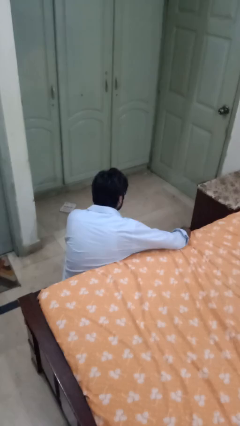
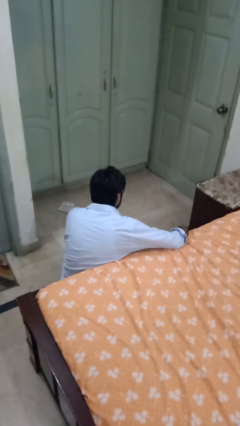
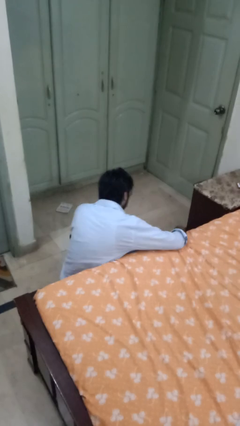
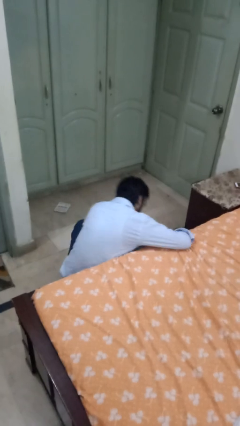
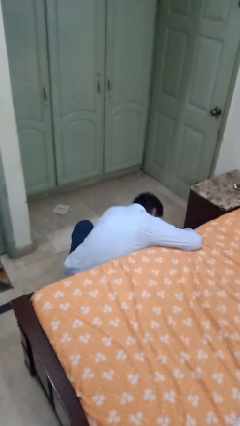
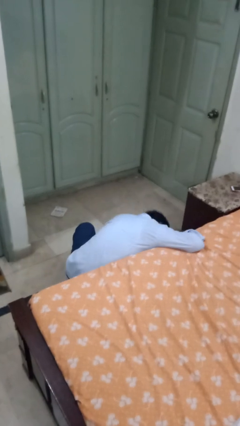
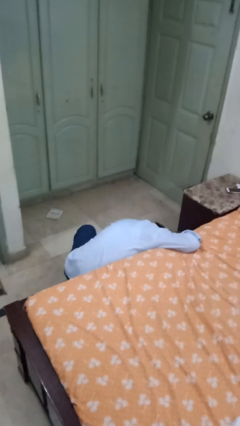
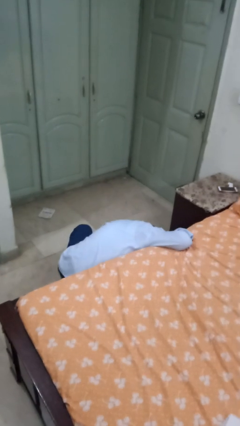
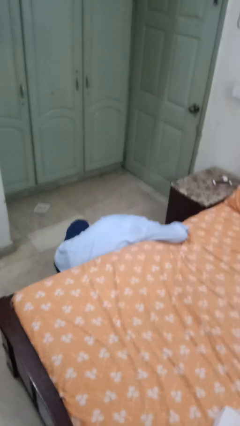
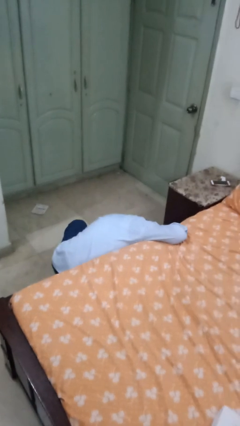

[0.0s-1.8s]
person searches under bed

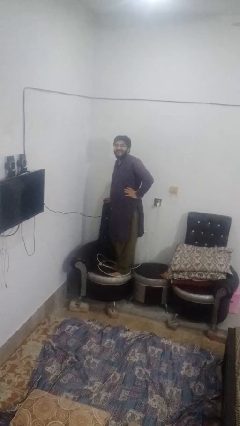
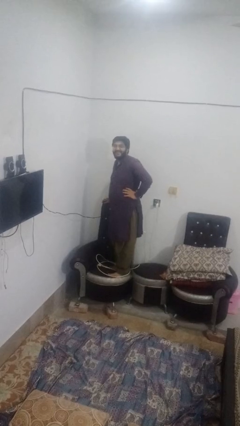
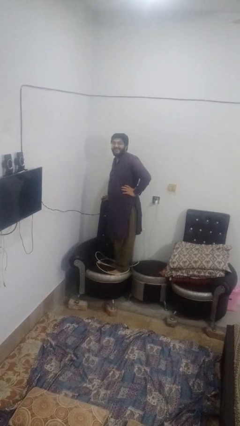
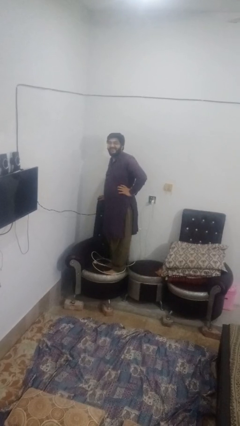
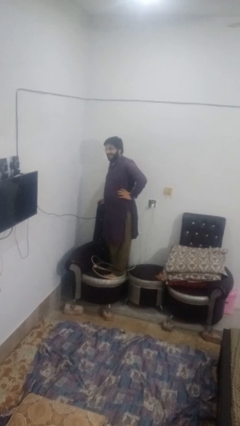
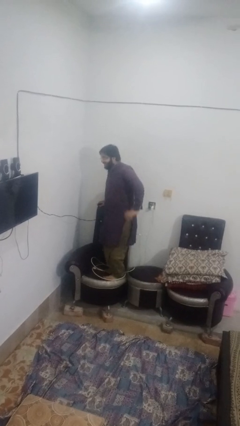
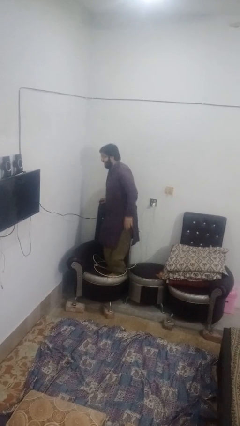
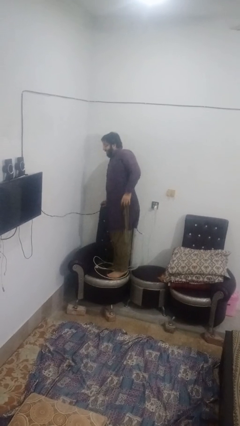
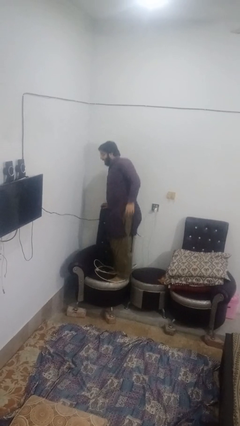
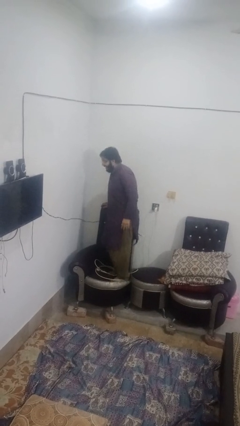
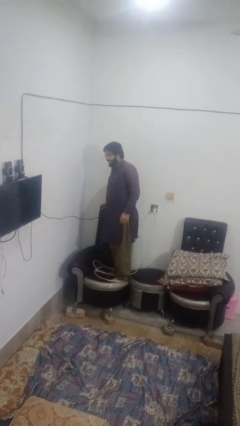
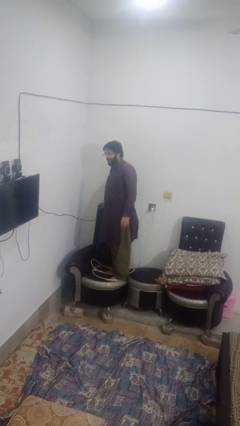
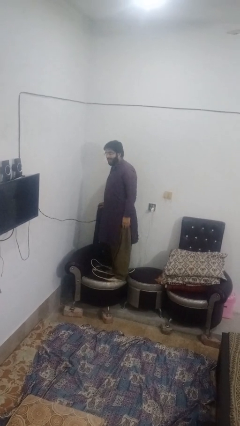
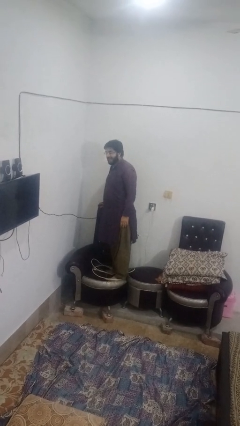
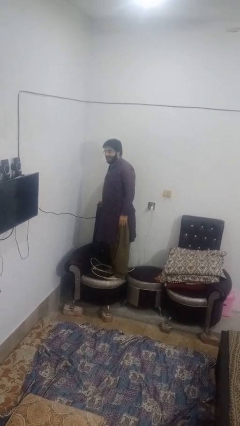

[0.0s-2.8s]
person jumps on couch

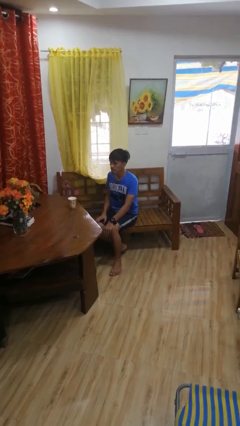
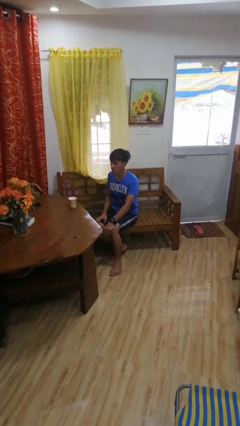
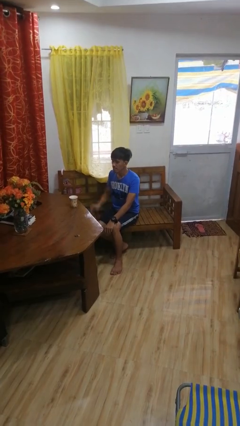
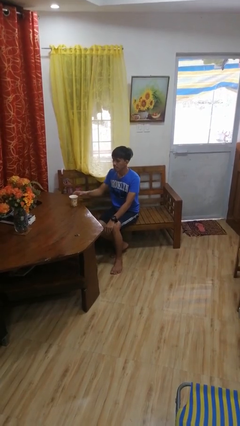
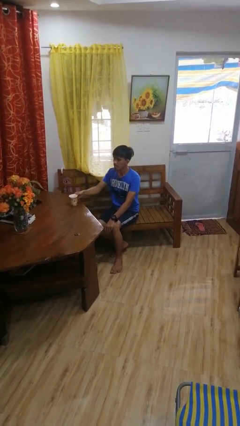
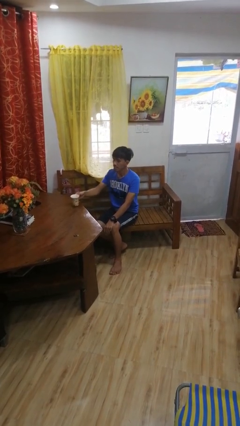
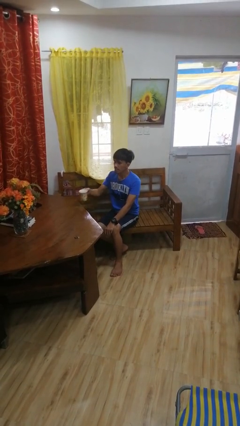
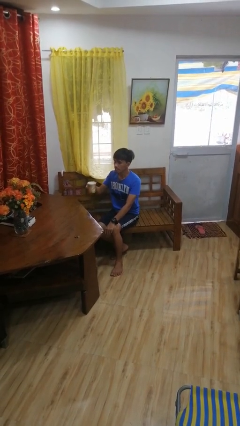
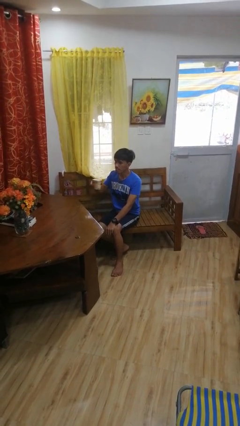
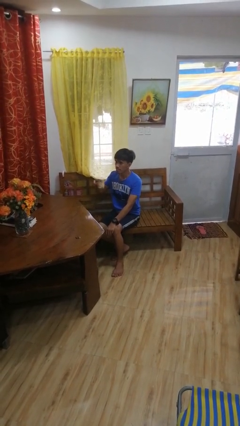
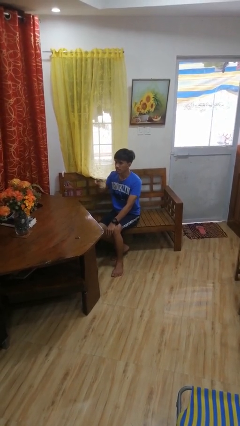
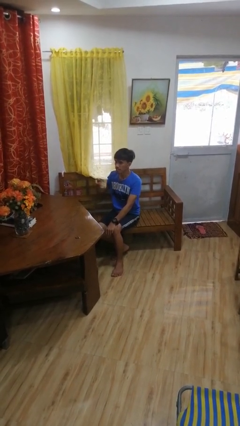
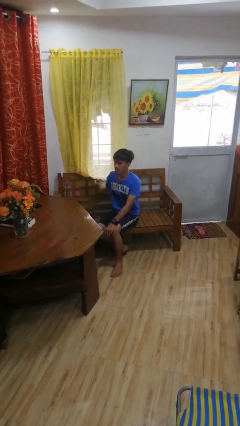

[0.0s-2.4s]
person picks up object from table

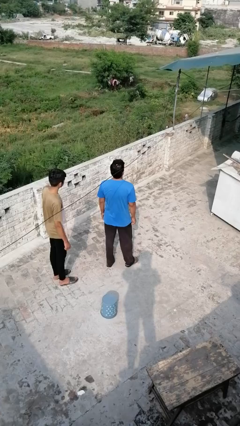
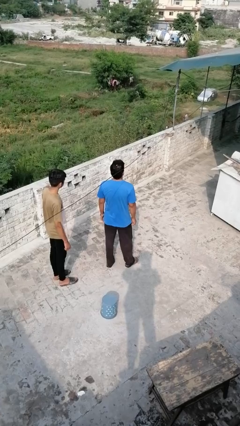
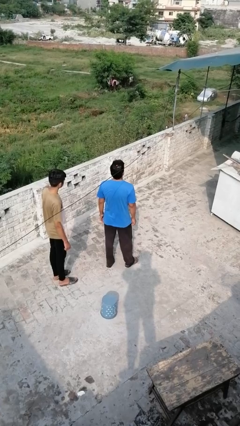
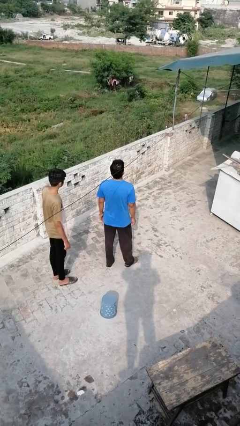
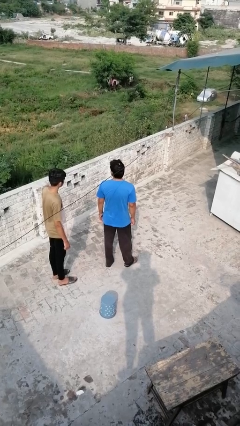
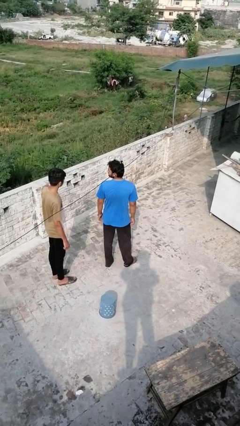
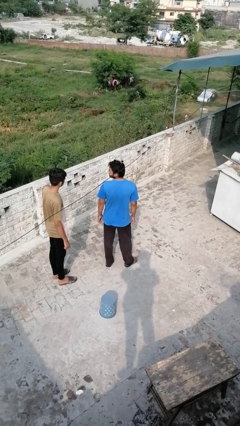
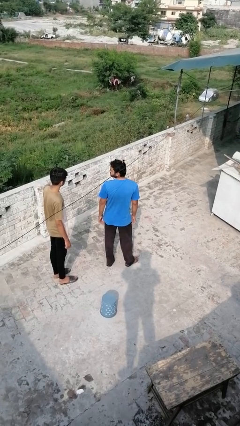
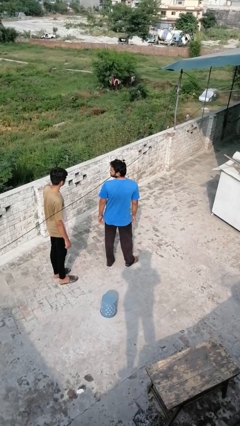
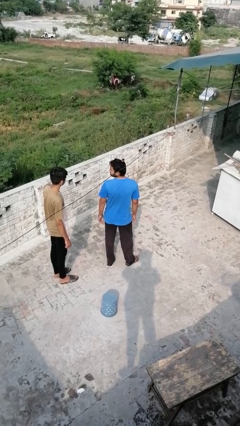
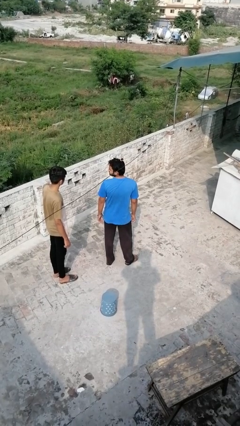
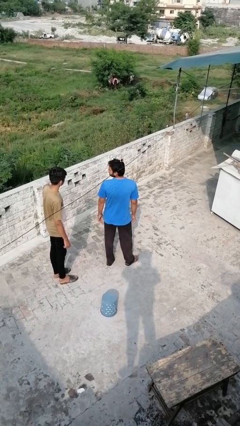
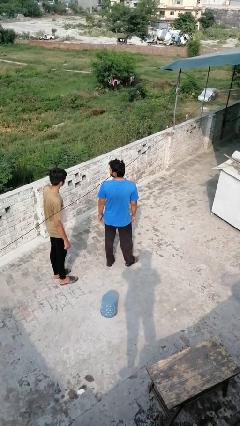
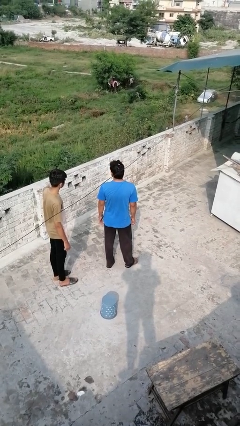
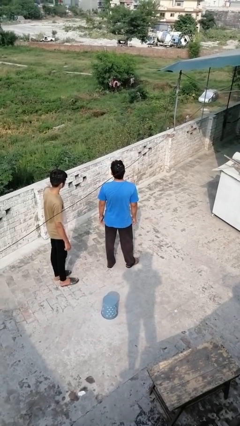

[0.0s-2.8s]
person looks over shoulder

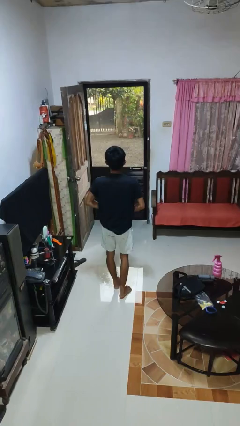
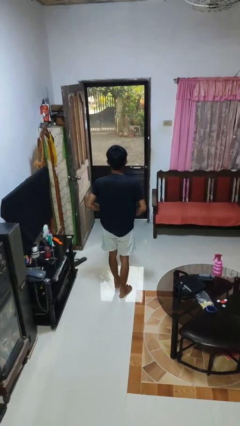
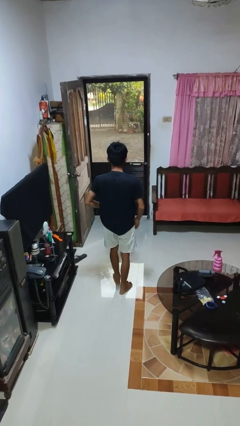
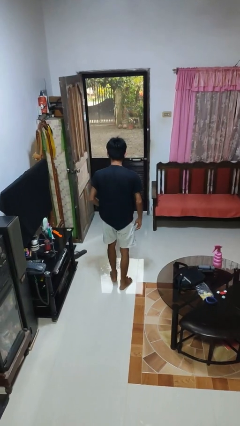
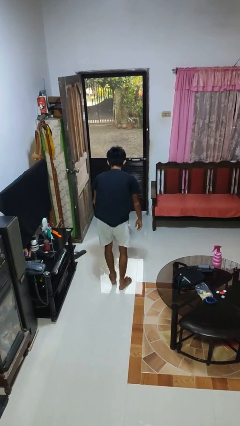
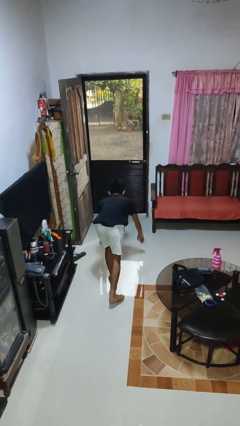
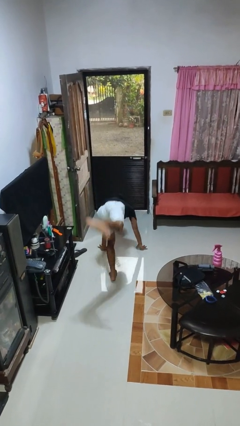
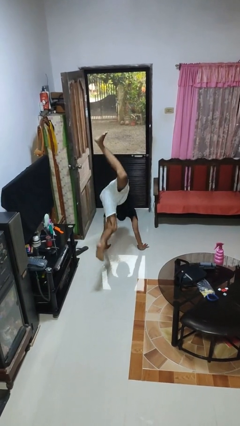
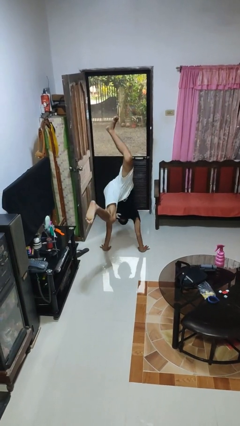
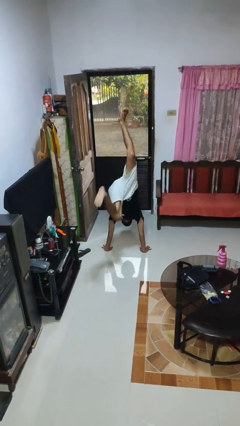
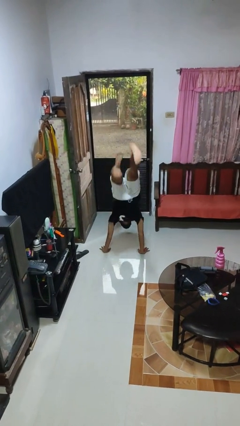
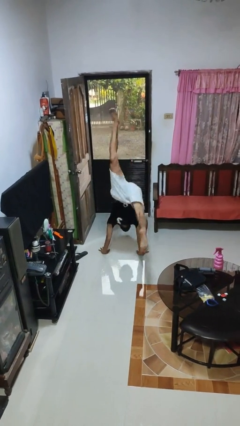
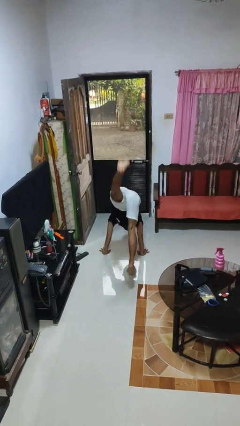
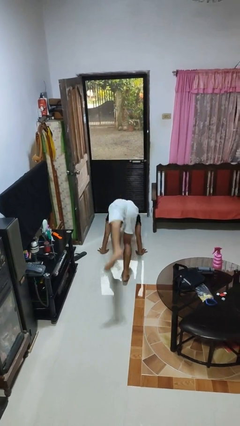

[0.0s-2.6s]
person handstand

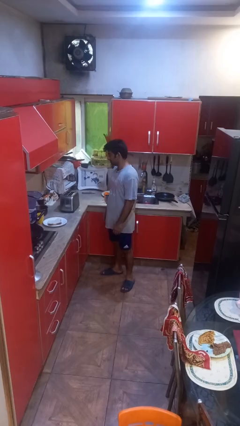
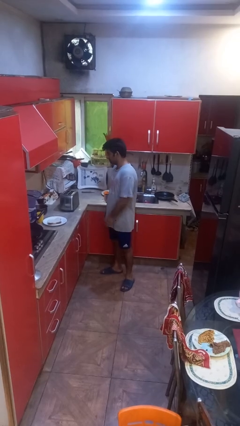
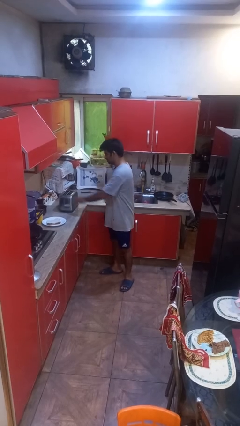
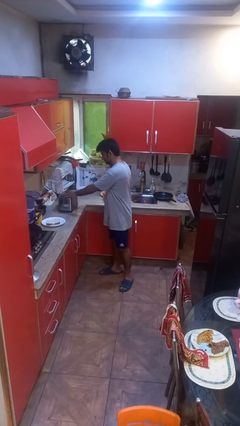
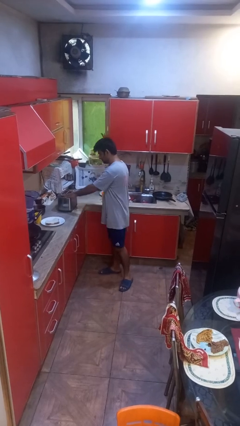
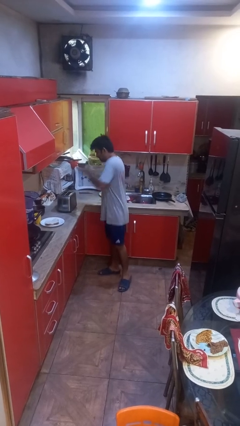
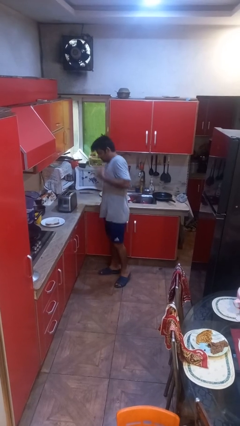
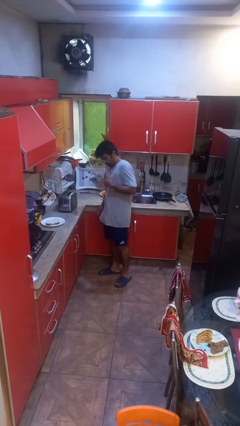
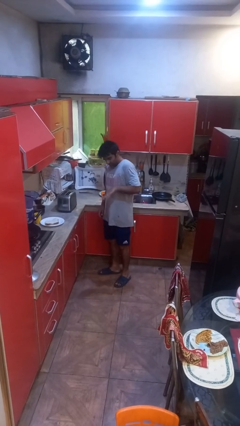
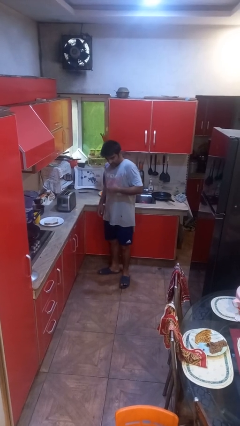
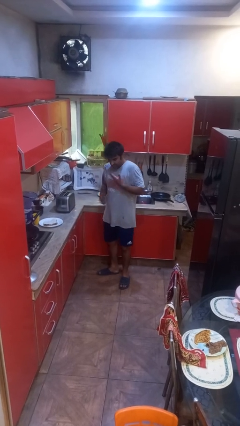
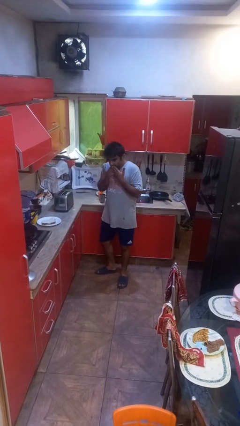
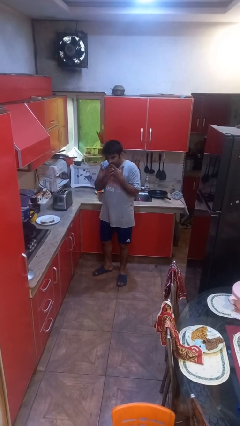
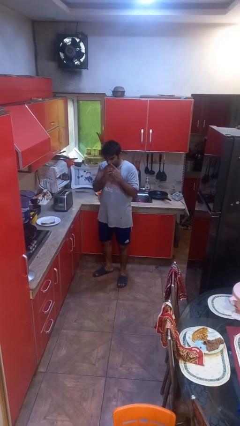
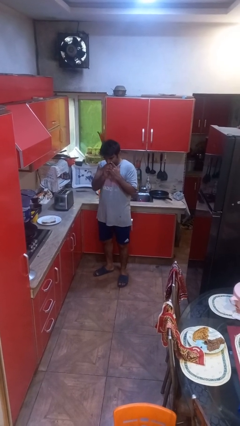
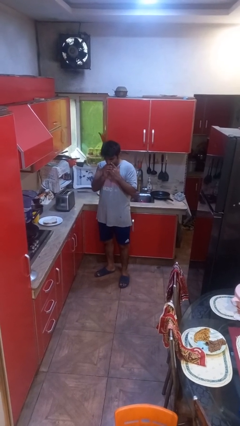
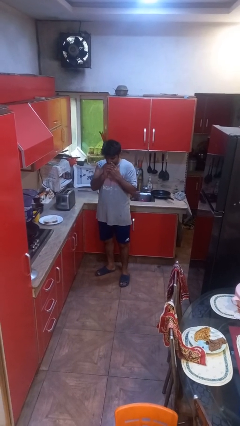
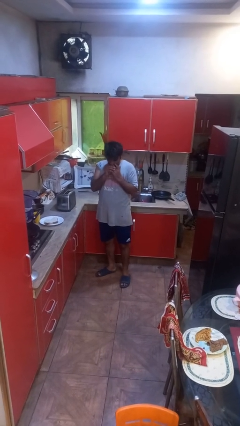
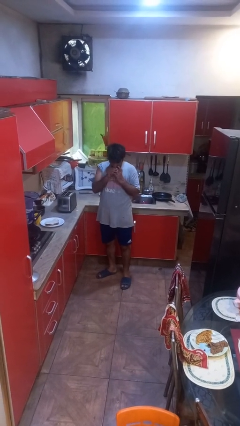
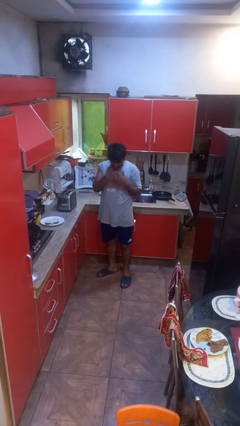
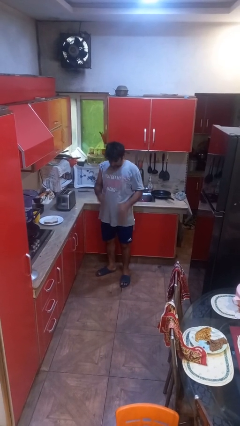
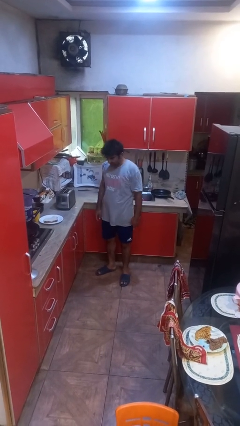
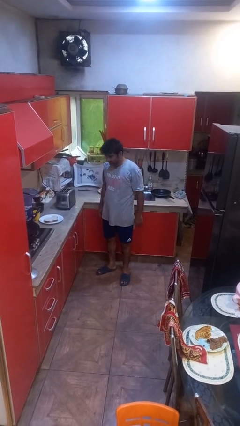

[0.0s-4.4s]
person burns hand

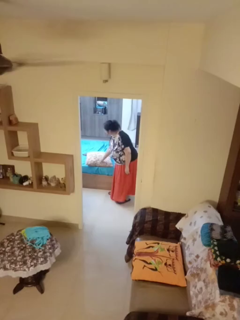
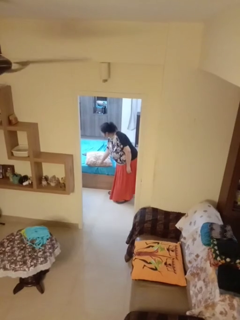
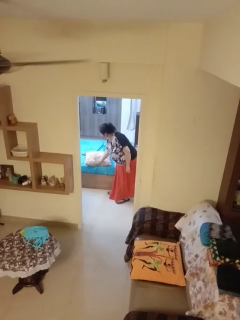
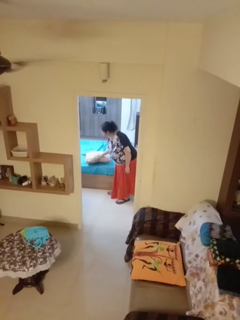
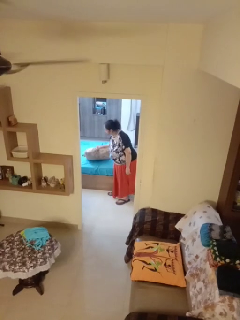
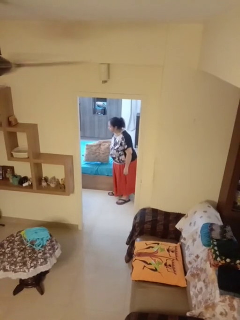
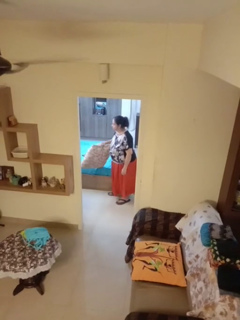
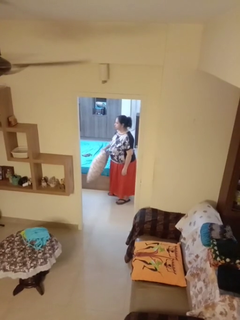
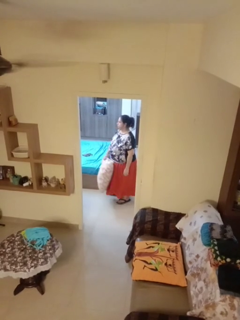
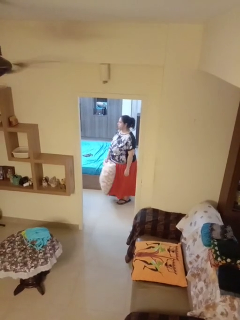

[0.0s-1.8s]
person picks up object from bed
